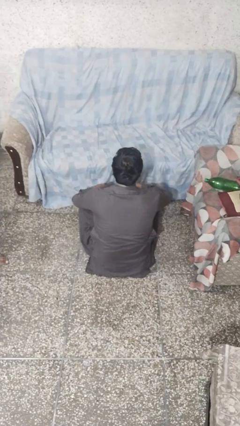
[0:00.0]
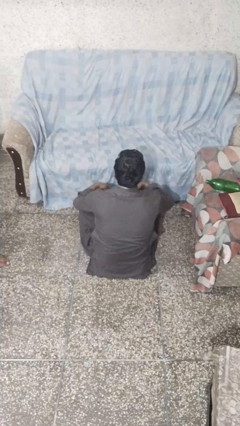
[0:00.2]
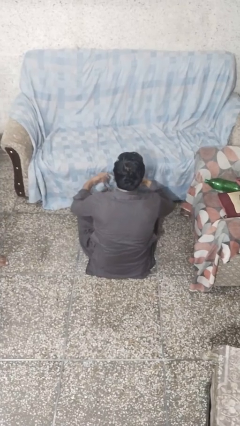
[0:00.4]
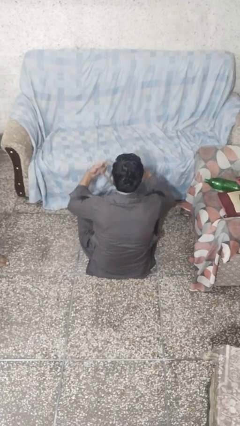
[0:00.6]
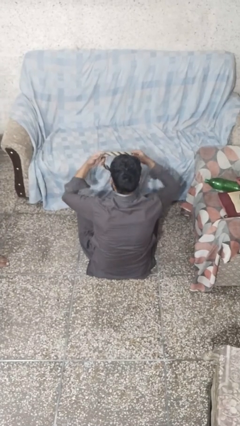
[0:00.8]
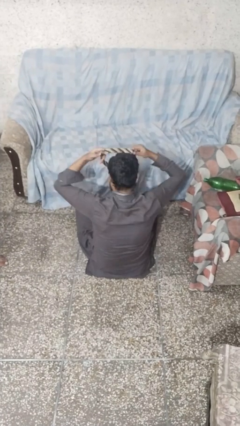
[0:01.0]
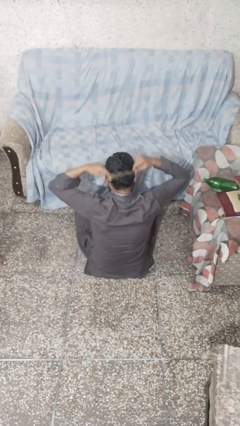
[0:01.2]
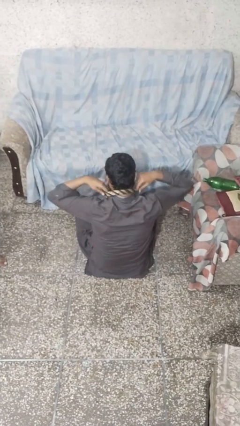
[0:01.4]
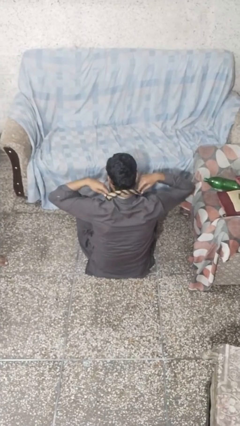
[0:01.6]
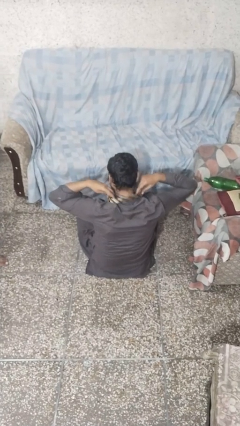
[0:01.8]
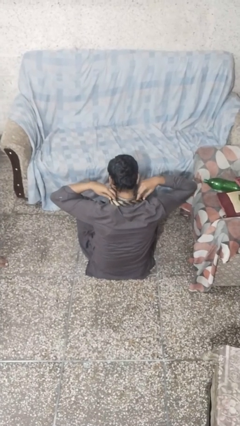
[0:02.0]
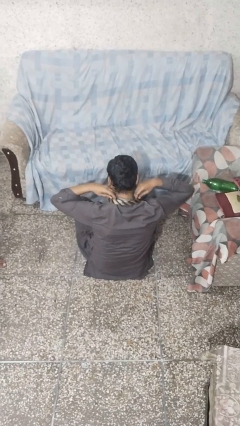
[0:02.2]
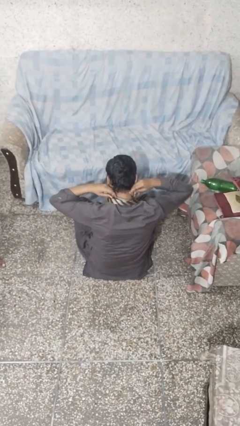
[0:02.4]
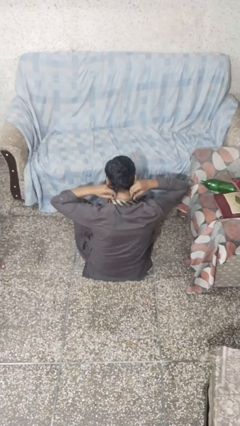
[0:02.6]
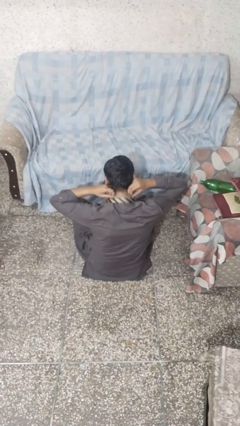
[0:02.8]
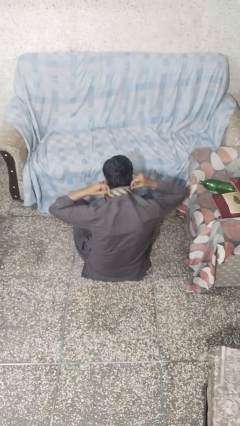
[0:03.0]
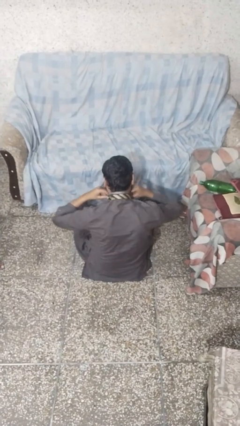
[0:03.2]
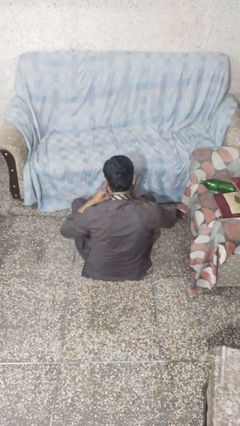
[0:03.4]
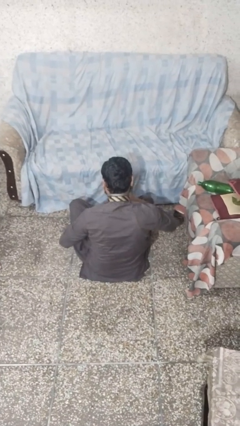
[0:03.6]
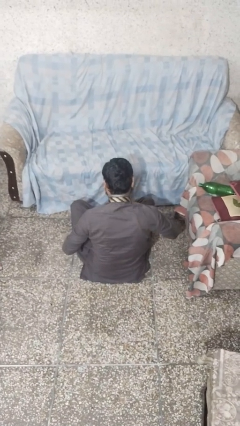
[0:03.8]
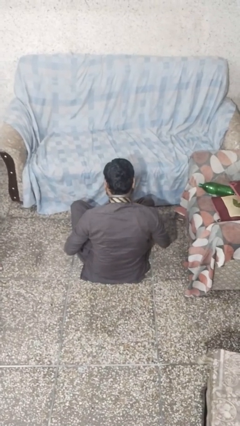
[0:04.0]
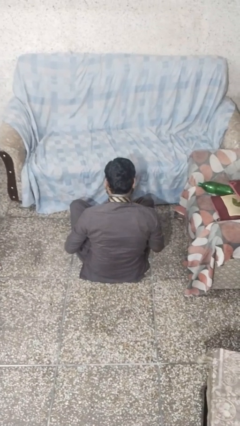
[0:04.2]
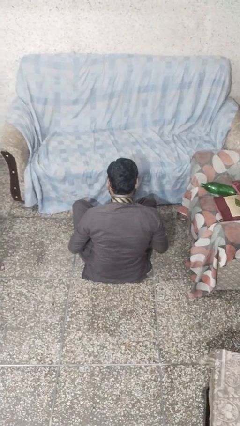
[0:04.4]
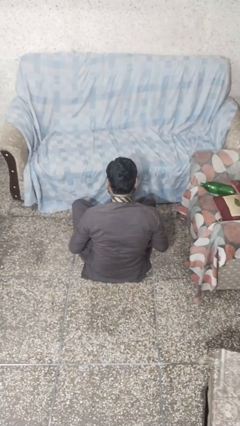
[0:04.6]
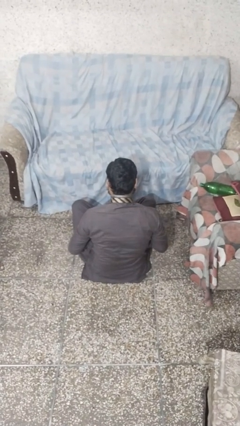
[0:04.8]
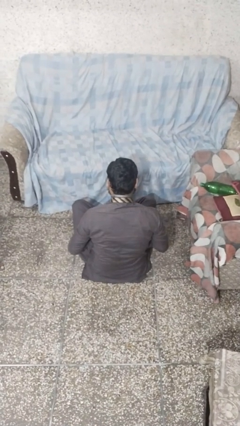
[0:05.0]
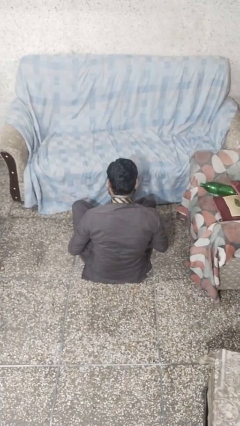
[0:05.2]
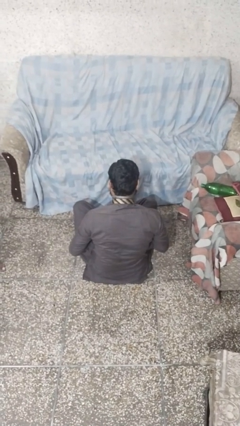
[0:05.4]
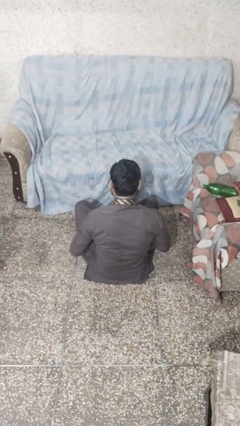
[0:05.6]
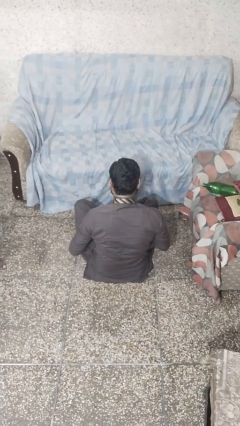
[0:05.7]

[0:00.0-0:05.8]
person puts on necktie

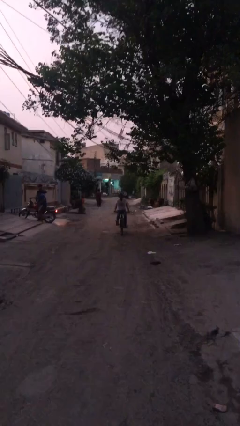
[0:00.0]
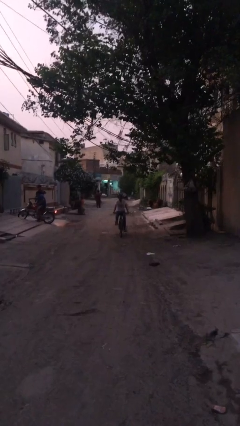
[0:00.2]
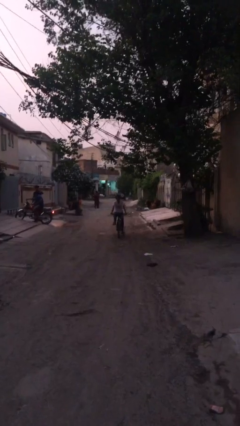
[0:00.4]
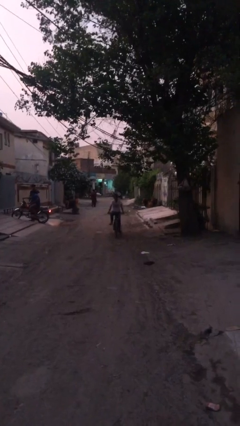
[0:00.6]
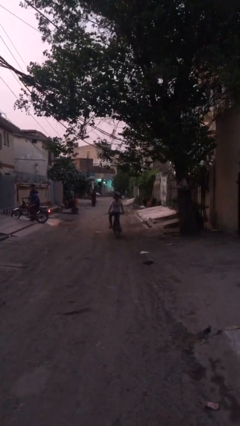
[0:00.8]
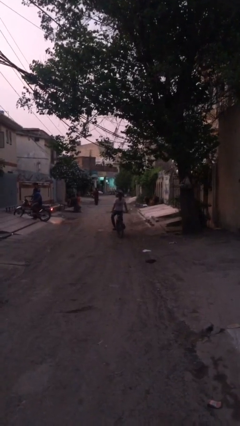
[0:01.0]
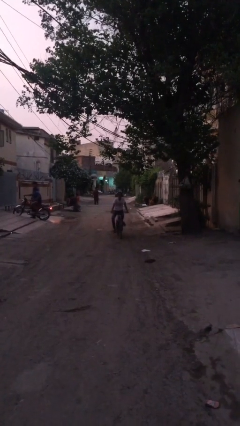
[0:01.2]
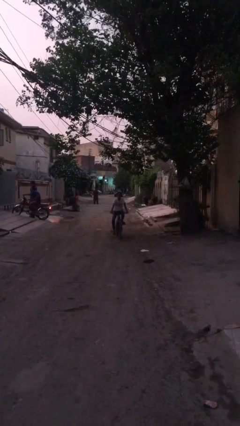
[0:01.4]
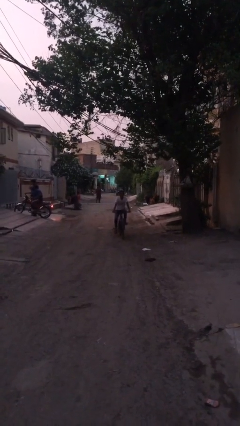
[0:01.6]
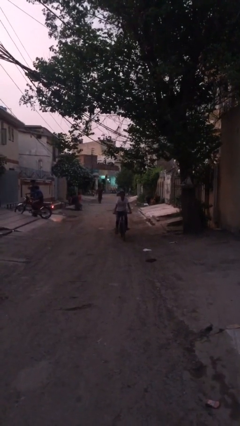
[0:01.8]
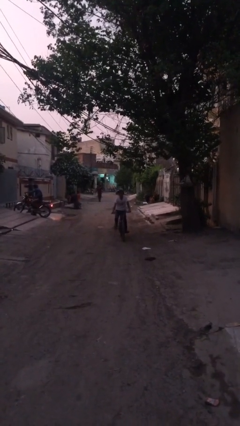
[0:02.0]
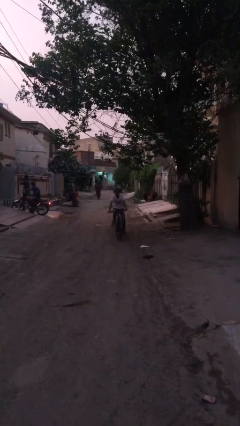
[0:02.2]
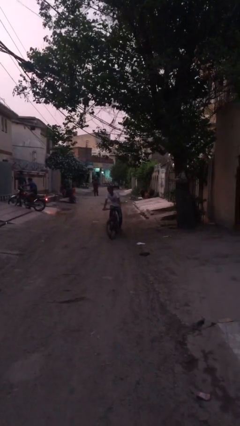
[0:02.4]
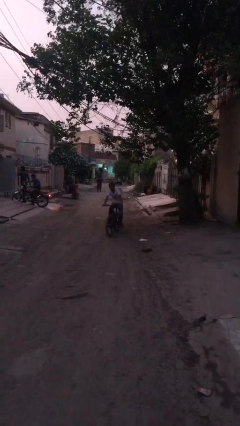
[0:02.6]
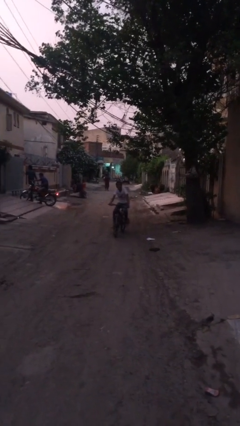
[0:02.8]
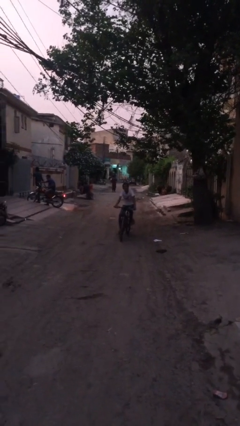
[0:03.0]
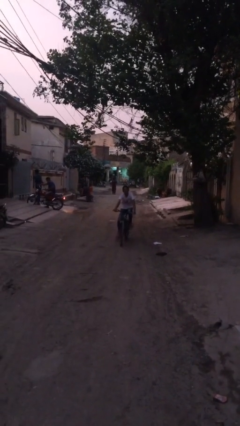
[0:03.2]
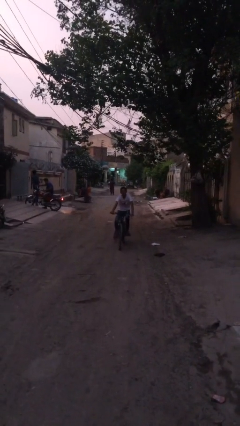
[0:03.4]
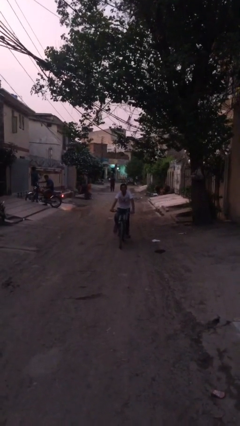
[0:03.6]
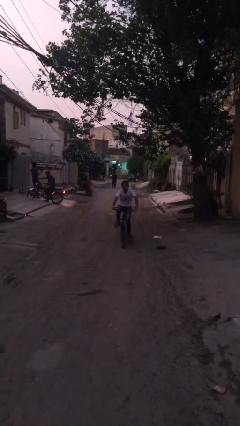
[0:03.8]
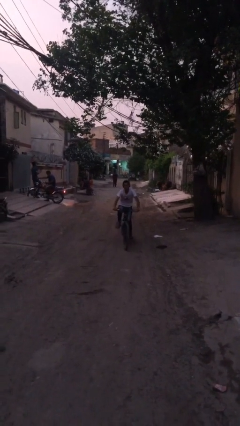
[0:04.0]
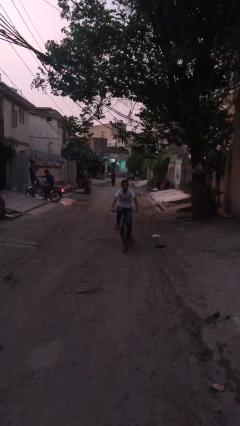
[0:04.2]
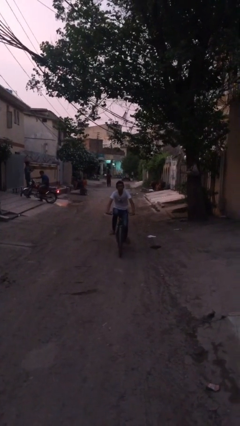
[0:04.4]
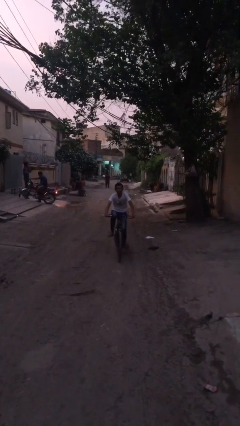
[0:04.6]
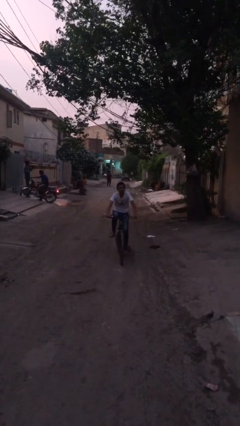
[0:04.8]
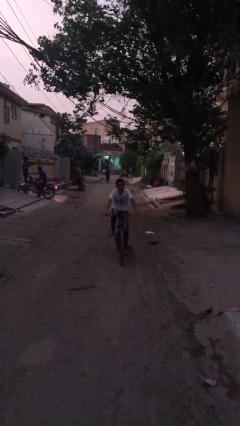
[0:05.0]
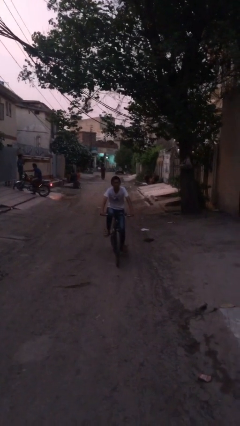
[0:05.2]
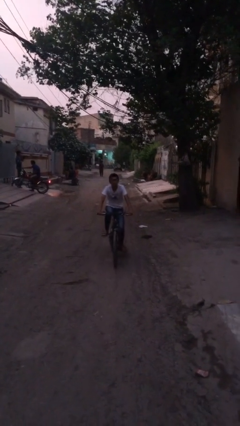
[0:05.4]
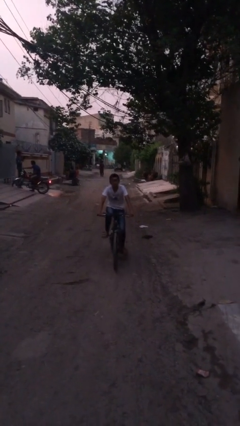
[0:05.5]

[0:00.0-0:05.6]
person rides bicycle

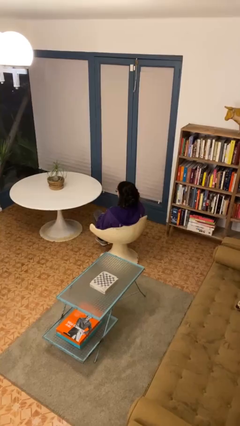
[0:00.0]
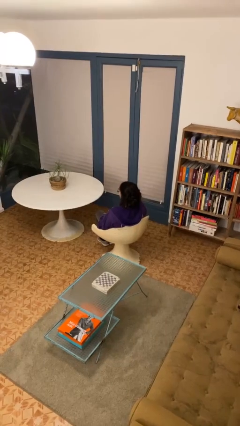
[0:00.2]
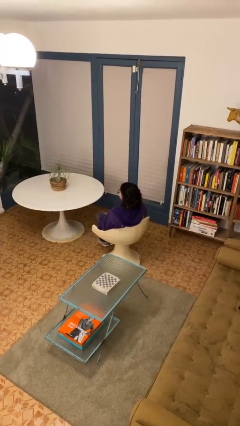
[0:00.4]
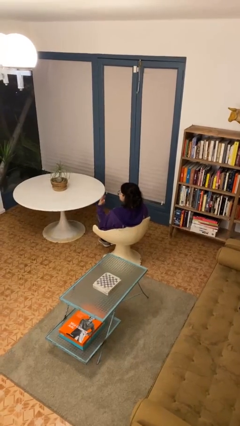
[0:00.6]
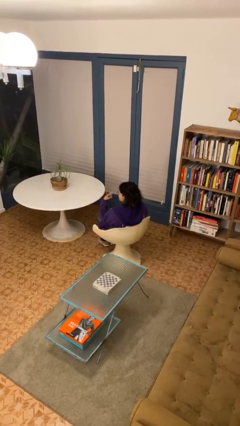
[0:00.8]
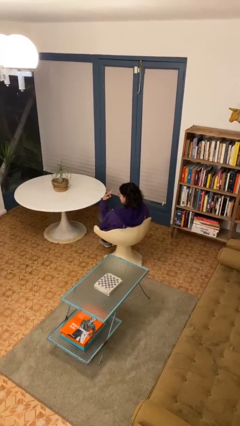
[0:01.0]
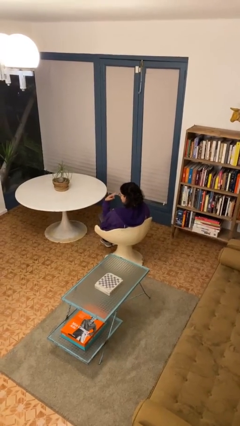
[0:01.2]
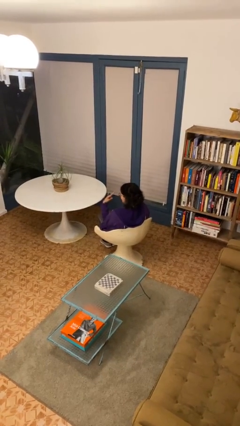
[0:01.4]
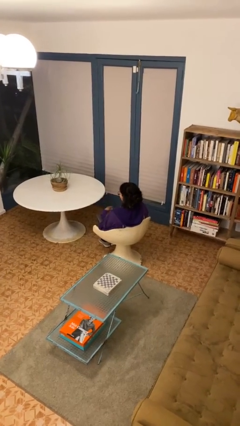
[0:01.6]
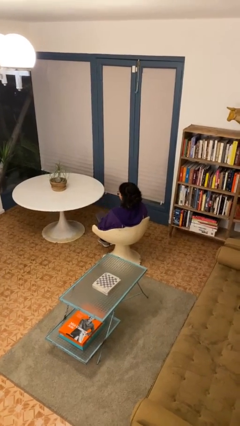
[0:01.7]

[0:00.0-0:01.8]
person gestures watch closely

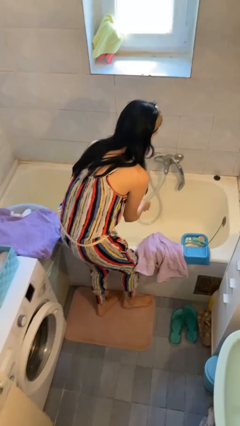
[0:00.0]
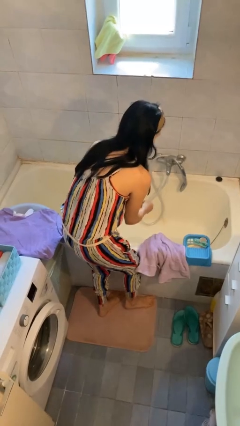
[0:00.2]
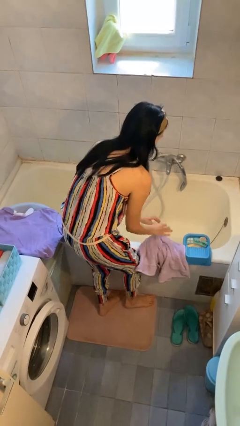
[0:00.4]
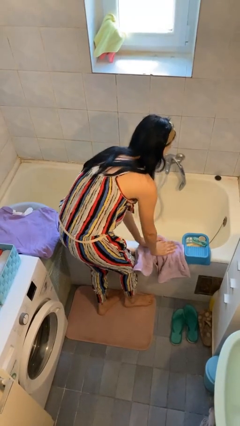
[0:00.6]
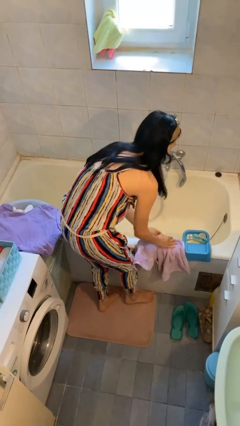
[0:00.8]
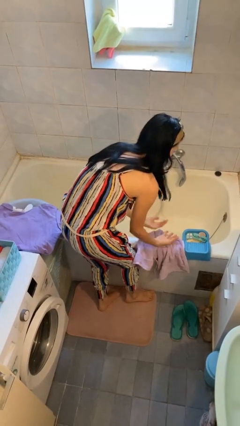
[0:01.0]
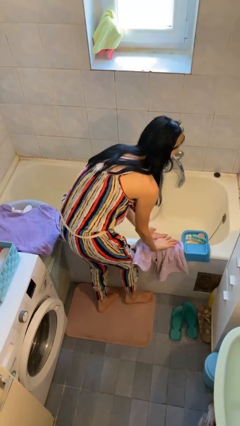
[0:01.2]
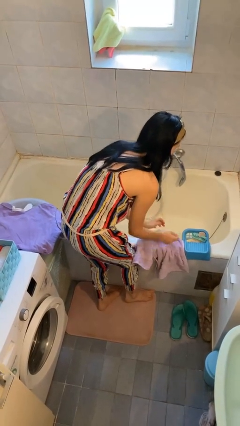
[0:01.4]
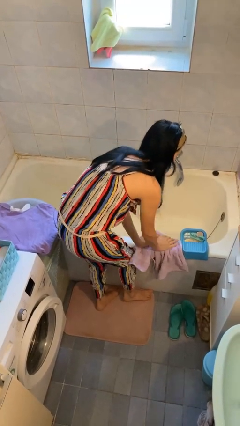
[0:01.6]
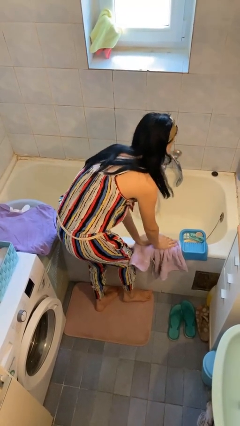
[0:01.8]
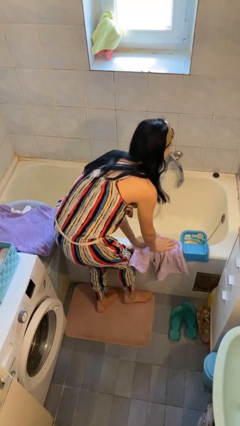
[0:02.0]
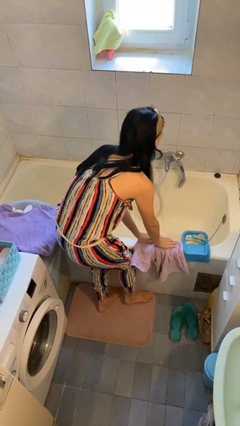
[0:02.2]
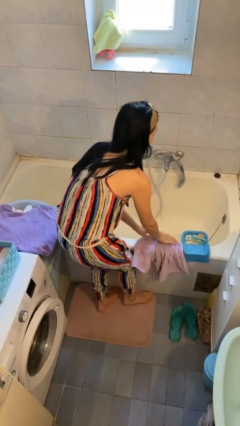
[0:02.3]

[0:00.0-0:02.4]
person dries hands with towel

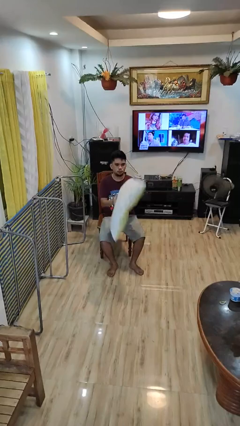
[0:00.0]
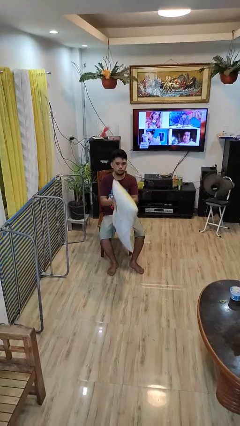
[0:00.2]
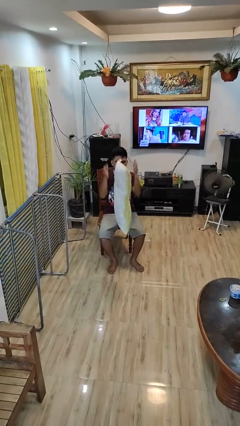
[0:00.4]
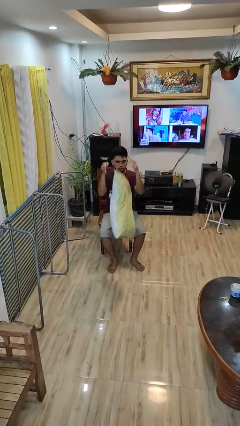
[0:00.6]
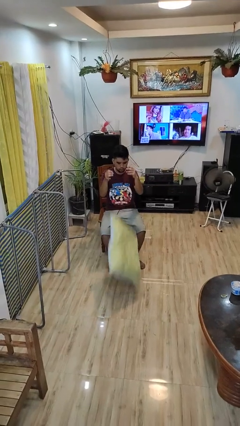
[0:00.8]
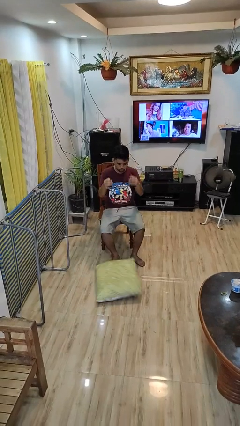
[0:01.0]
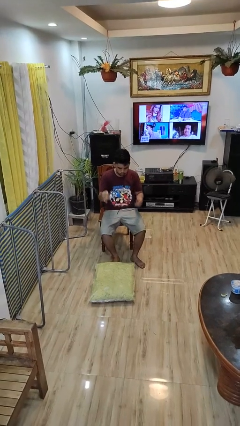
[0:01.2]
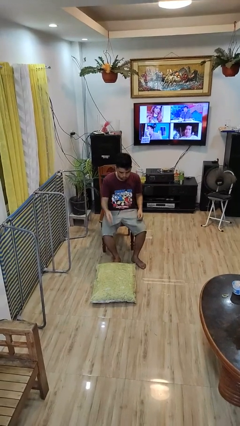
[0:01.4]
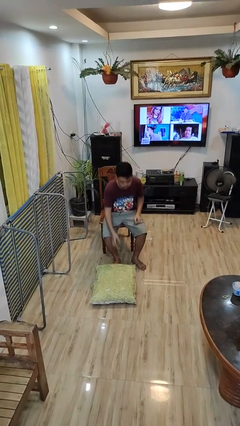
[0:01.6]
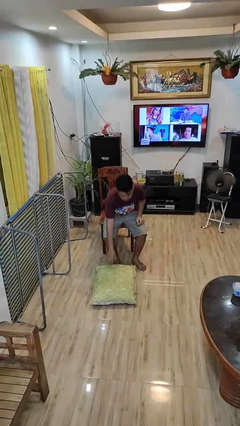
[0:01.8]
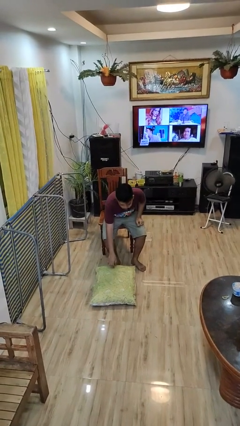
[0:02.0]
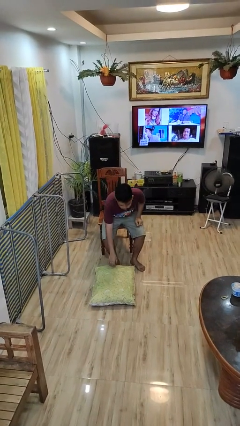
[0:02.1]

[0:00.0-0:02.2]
person drops object
